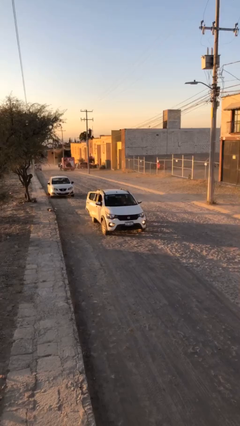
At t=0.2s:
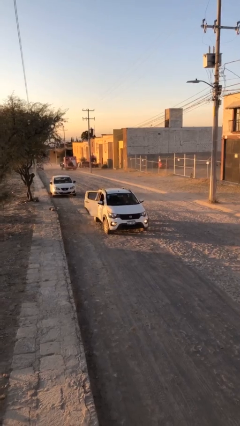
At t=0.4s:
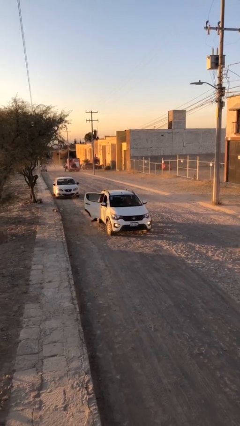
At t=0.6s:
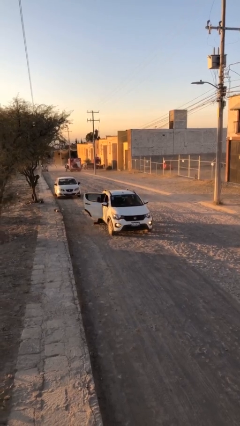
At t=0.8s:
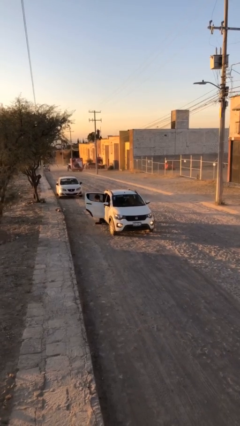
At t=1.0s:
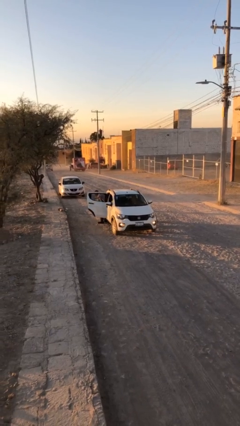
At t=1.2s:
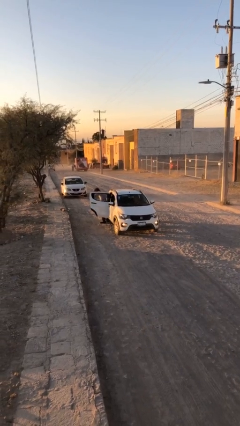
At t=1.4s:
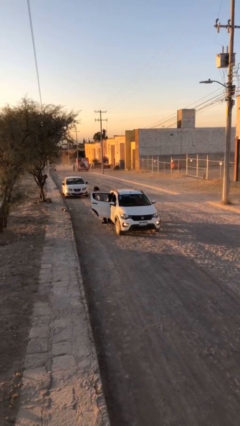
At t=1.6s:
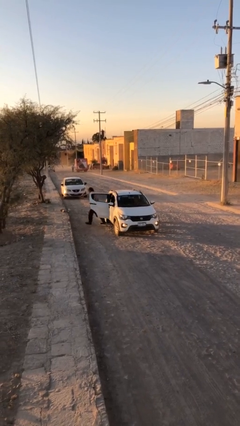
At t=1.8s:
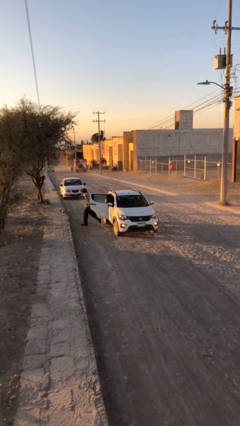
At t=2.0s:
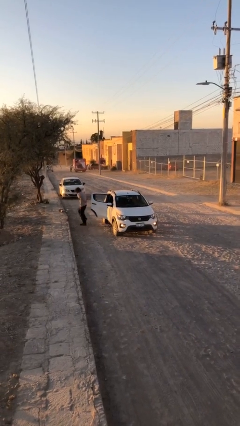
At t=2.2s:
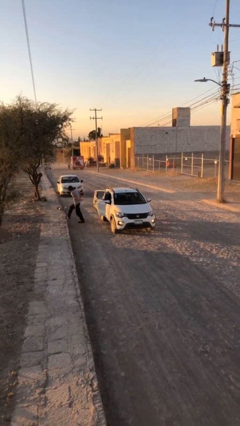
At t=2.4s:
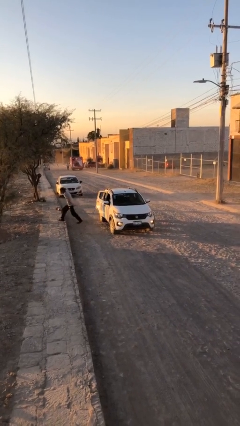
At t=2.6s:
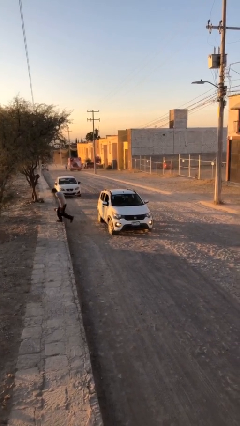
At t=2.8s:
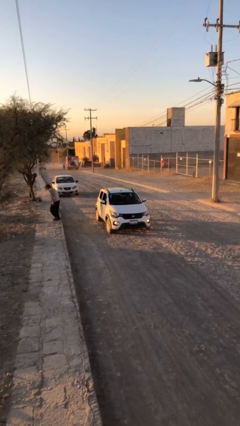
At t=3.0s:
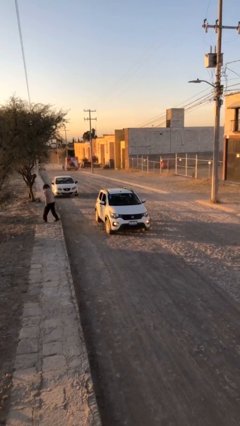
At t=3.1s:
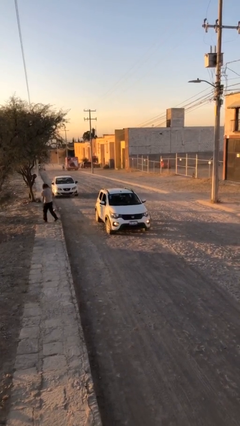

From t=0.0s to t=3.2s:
car drops off person

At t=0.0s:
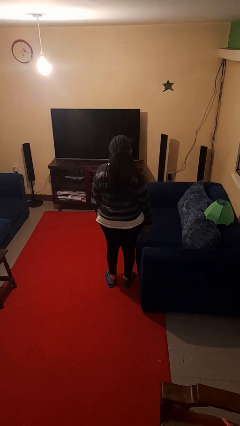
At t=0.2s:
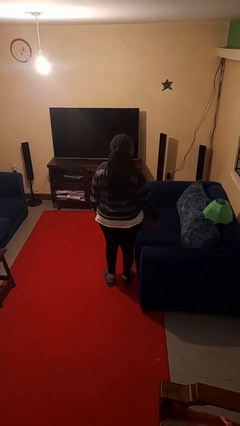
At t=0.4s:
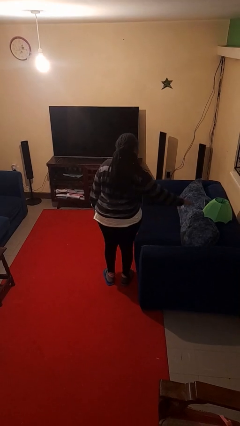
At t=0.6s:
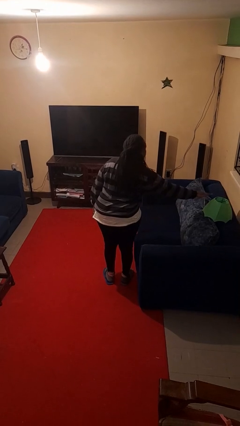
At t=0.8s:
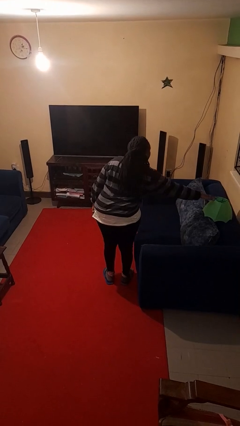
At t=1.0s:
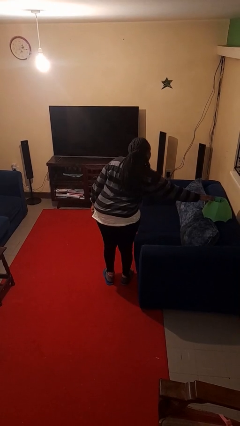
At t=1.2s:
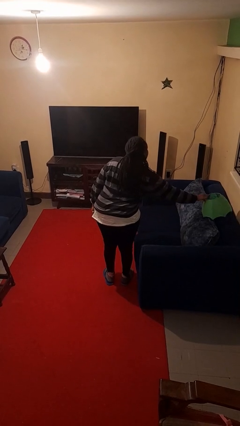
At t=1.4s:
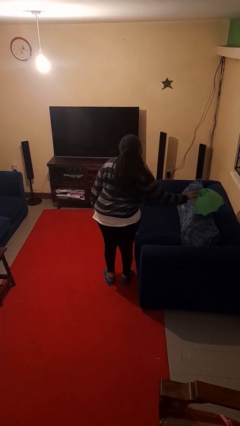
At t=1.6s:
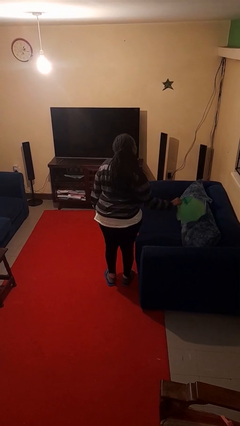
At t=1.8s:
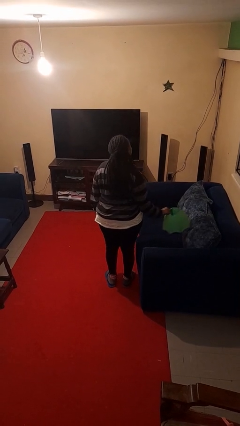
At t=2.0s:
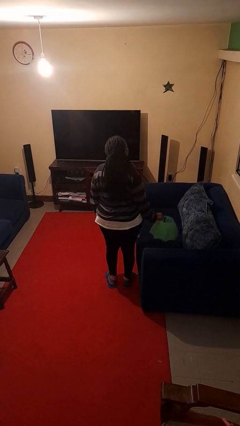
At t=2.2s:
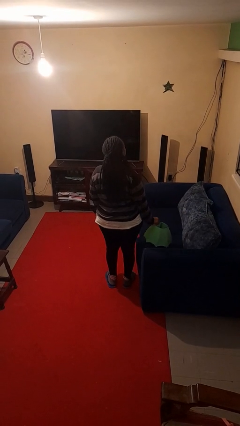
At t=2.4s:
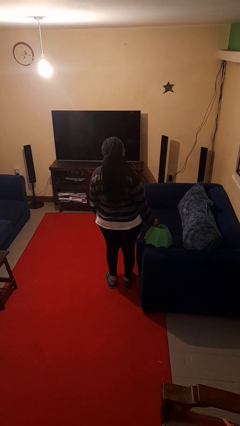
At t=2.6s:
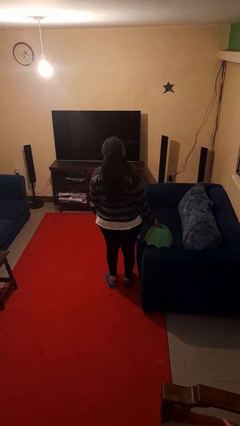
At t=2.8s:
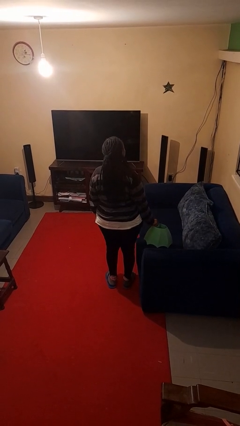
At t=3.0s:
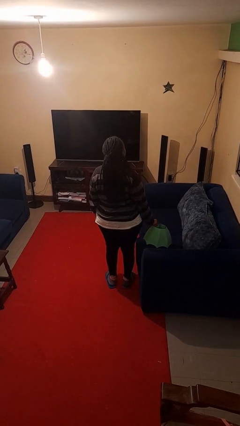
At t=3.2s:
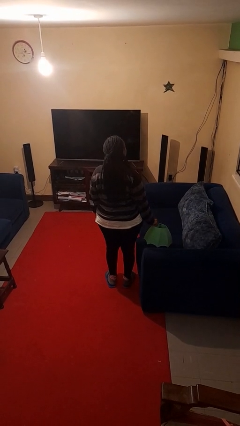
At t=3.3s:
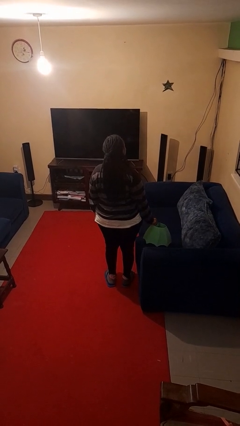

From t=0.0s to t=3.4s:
person picks up object from couch

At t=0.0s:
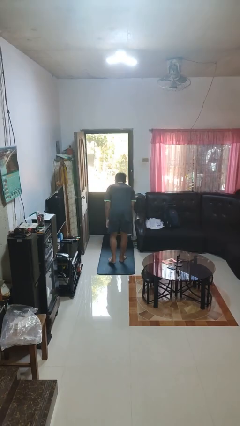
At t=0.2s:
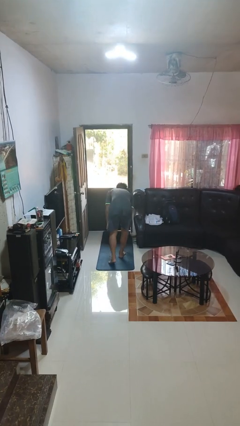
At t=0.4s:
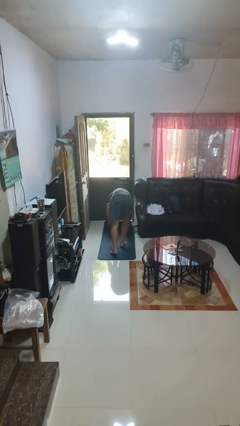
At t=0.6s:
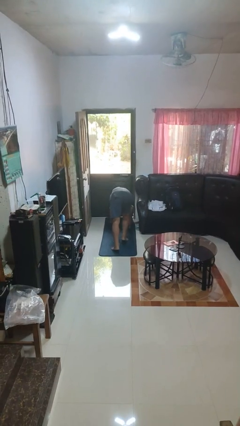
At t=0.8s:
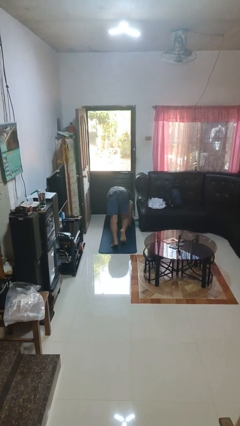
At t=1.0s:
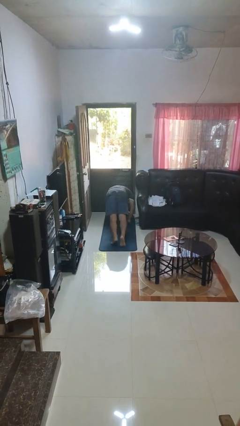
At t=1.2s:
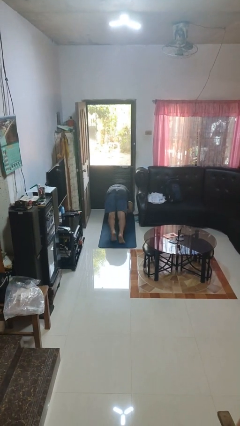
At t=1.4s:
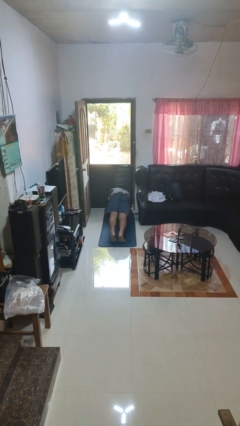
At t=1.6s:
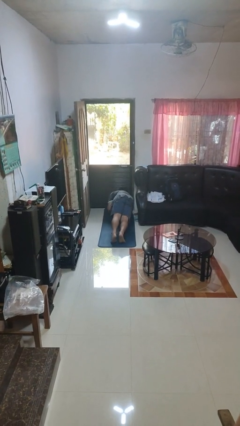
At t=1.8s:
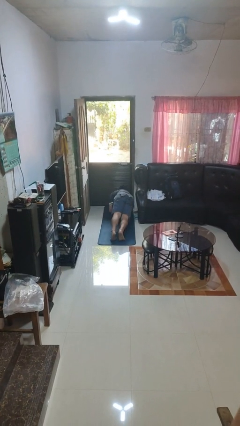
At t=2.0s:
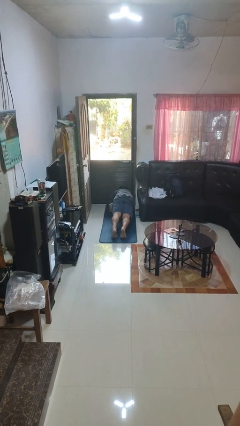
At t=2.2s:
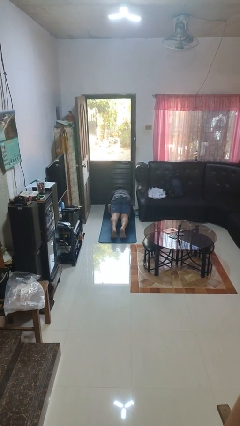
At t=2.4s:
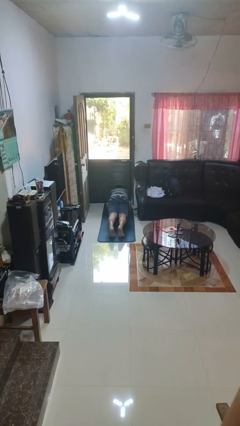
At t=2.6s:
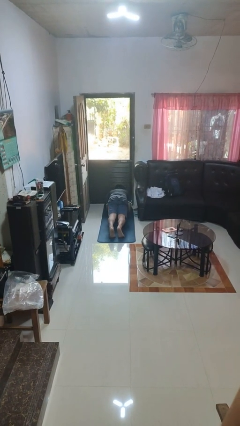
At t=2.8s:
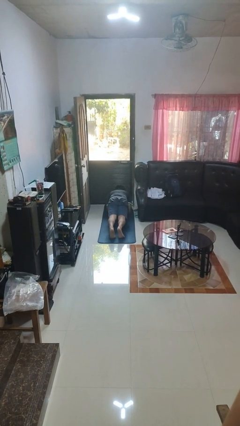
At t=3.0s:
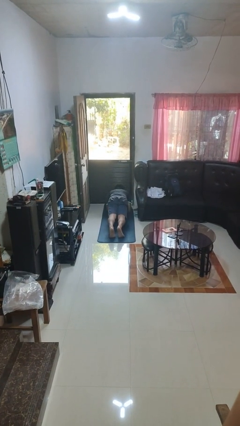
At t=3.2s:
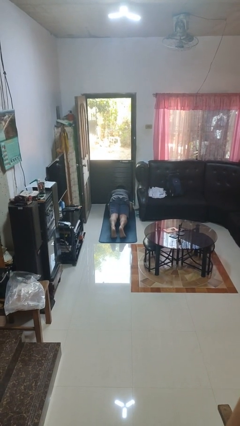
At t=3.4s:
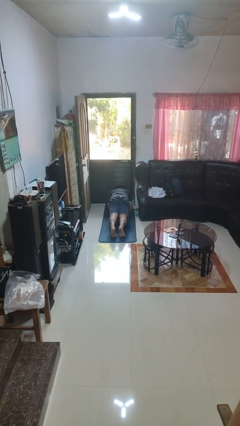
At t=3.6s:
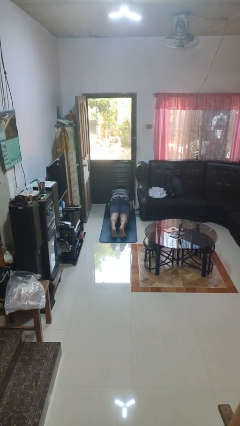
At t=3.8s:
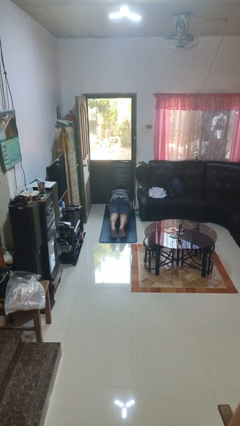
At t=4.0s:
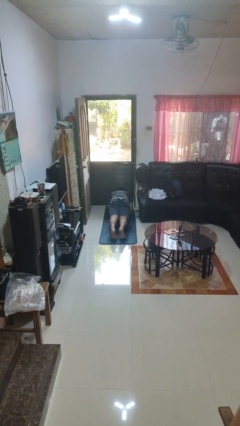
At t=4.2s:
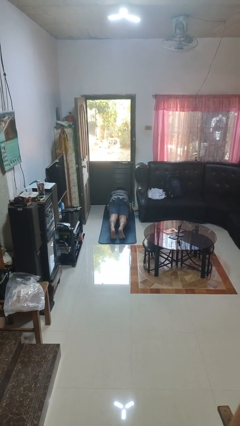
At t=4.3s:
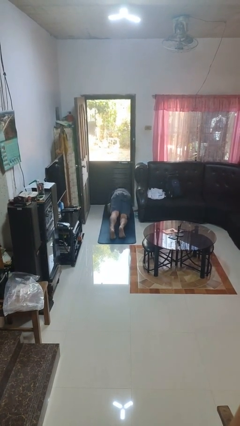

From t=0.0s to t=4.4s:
person exercises with plank

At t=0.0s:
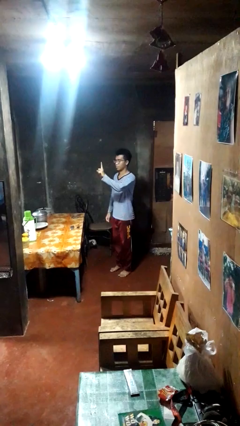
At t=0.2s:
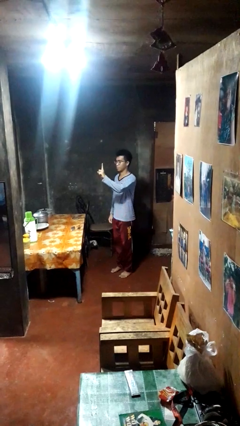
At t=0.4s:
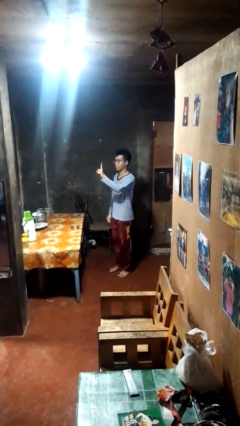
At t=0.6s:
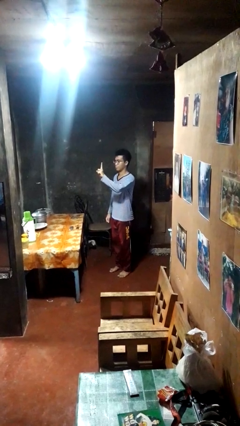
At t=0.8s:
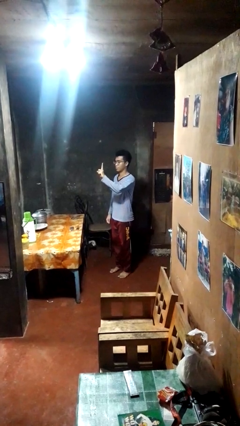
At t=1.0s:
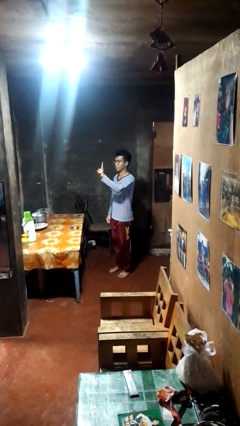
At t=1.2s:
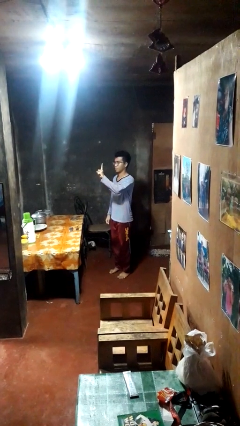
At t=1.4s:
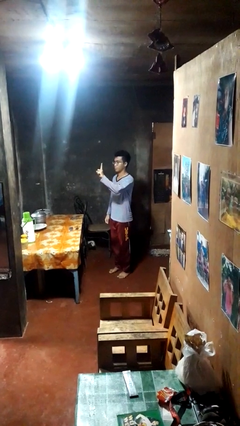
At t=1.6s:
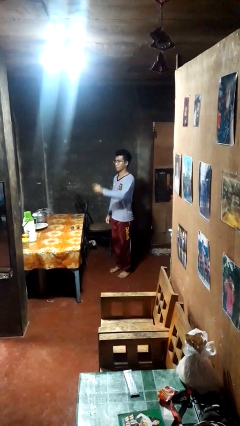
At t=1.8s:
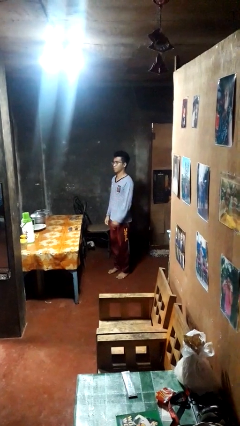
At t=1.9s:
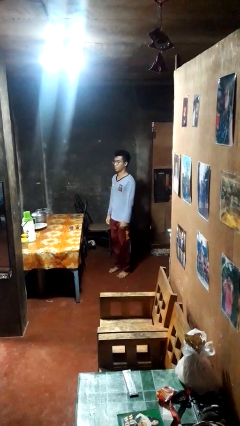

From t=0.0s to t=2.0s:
person gestures number one

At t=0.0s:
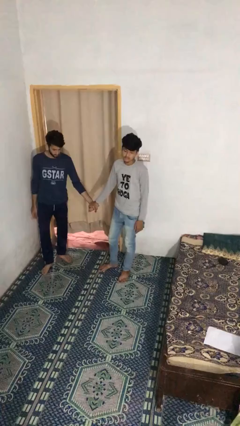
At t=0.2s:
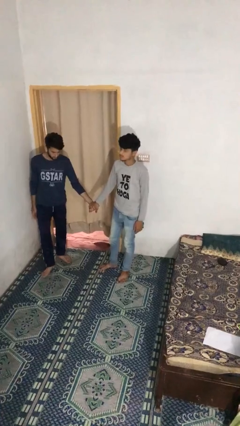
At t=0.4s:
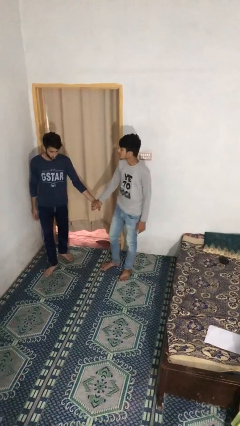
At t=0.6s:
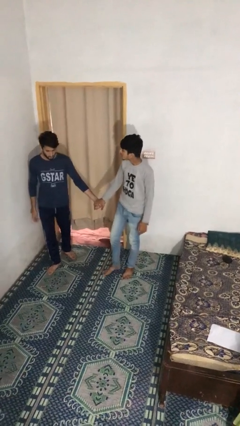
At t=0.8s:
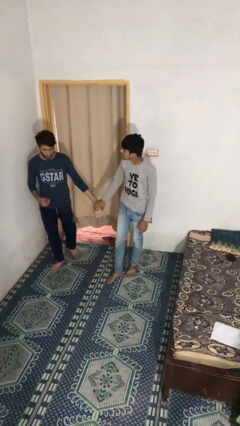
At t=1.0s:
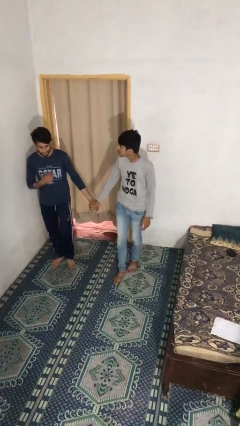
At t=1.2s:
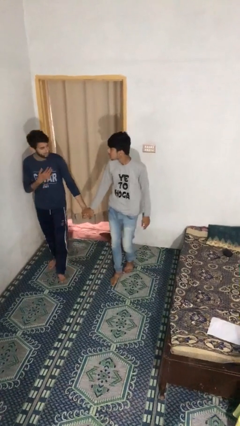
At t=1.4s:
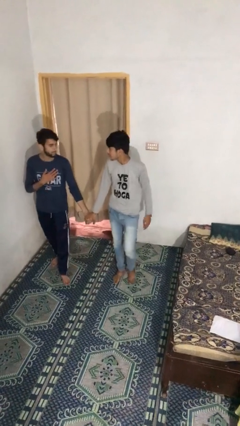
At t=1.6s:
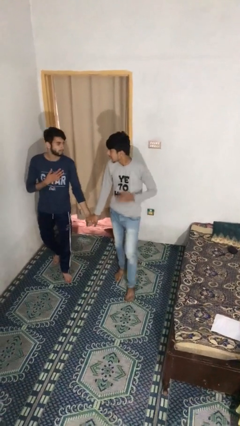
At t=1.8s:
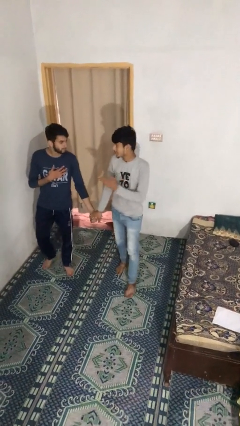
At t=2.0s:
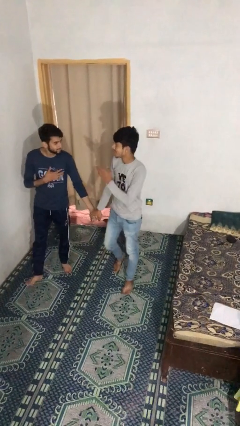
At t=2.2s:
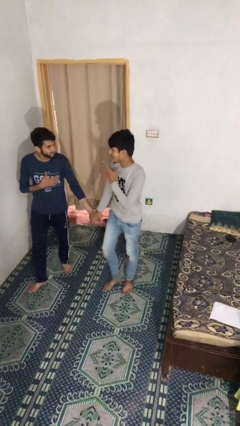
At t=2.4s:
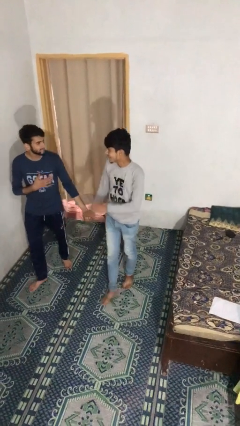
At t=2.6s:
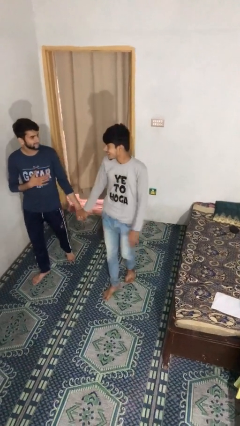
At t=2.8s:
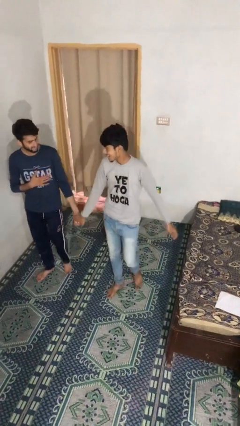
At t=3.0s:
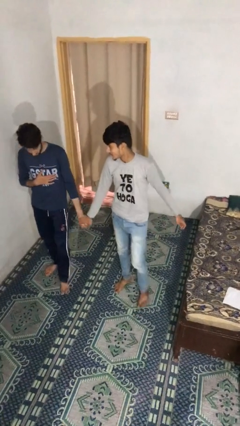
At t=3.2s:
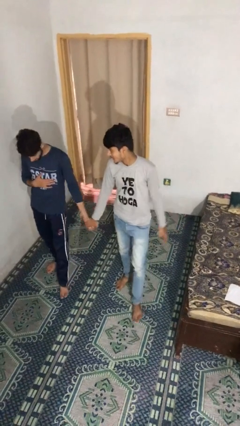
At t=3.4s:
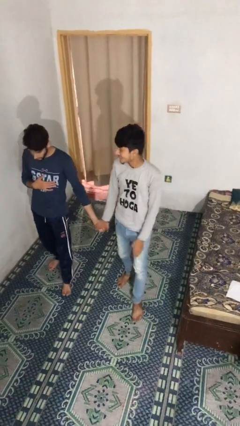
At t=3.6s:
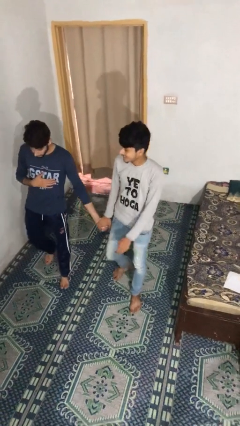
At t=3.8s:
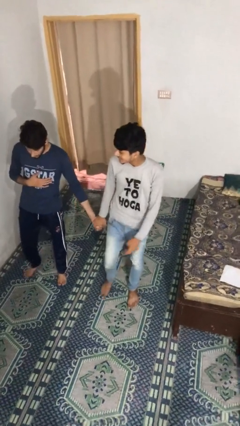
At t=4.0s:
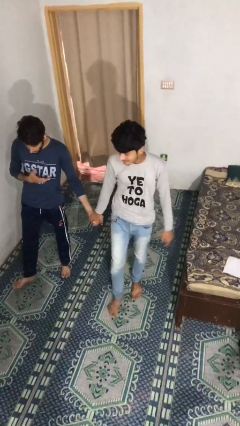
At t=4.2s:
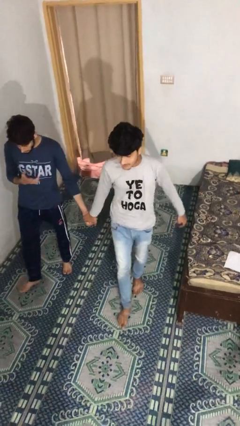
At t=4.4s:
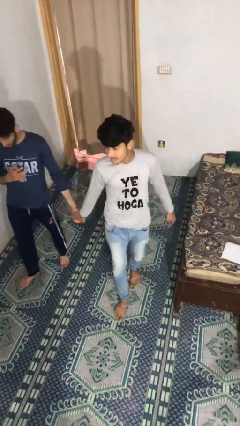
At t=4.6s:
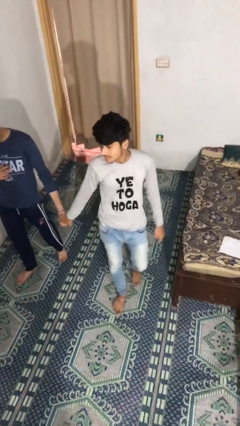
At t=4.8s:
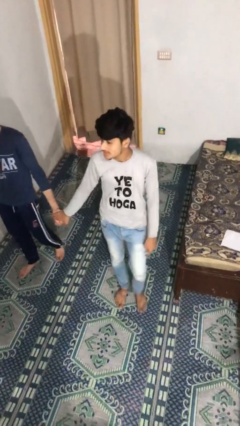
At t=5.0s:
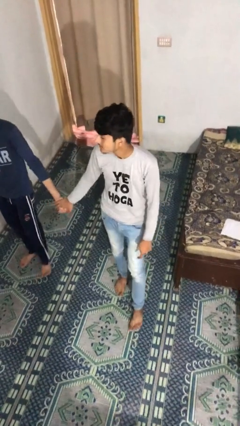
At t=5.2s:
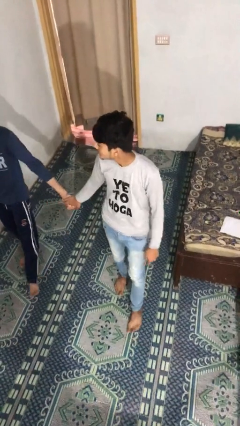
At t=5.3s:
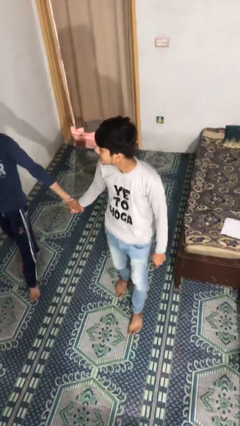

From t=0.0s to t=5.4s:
person holds hand
